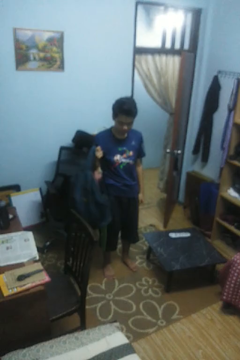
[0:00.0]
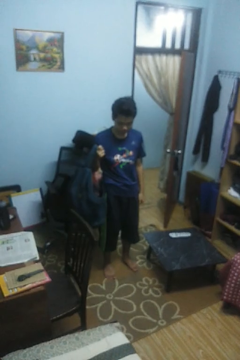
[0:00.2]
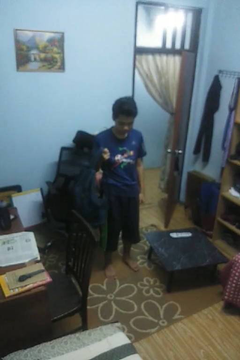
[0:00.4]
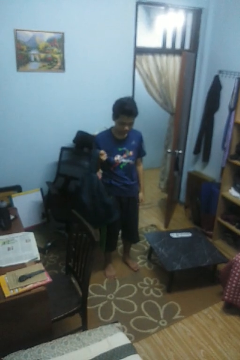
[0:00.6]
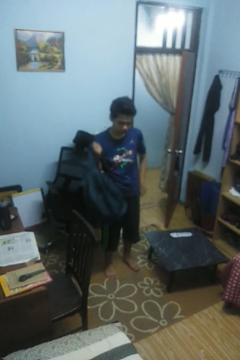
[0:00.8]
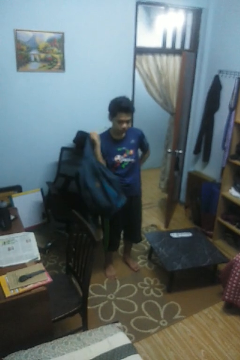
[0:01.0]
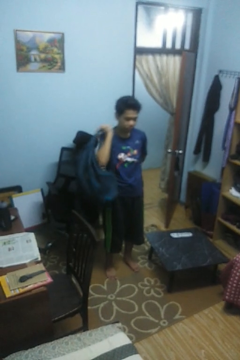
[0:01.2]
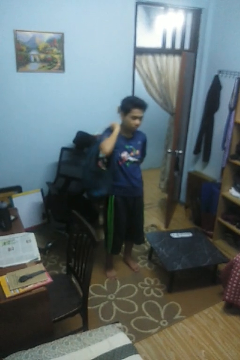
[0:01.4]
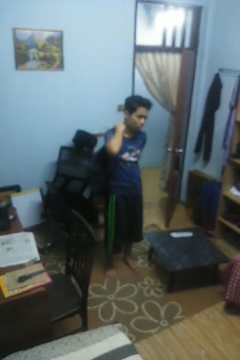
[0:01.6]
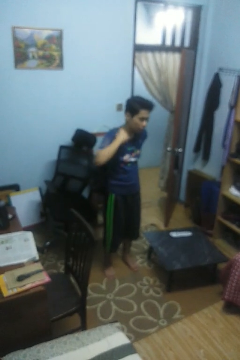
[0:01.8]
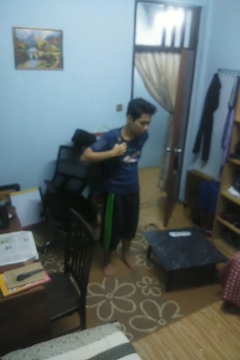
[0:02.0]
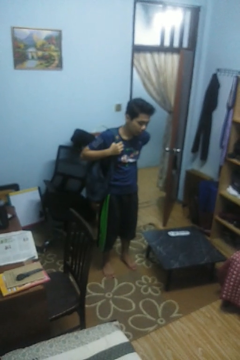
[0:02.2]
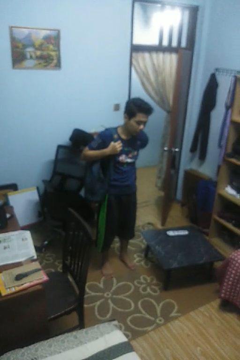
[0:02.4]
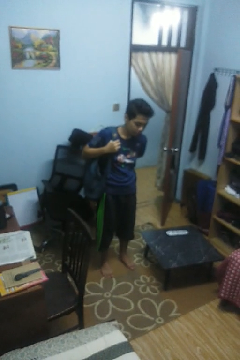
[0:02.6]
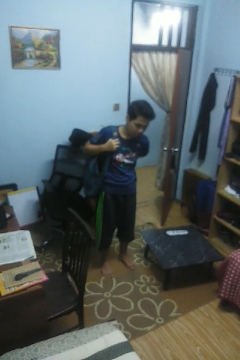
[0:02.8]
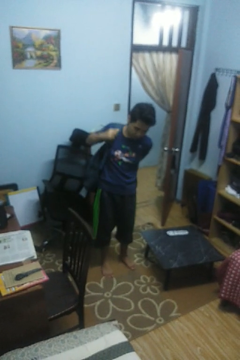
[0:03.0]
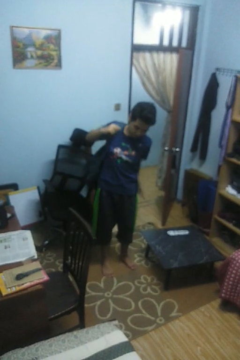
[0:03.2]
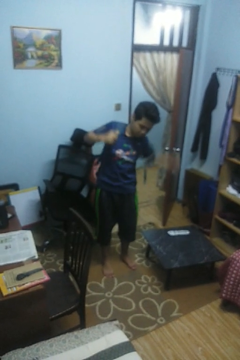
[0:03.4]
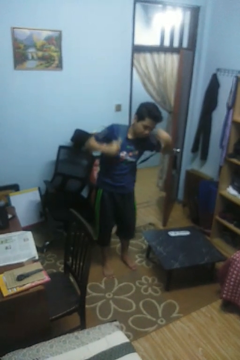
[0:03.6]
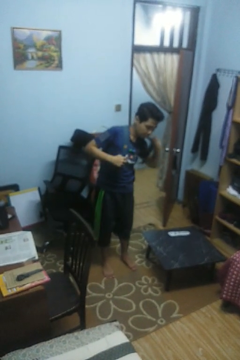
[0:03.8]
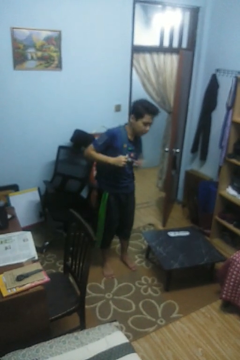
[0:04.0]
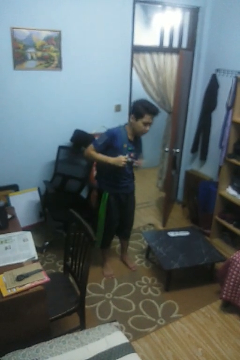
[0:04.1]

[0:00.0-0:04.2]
person puts on backpack

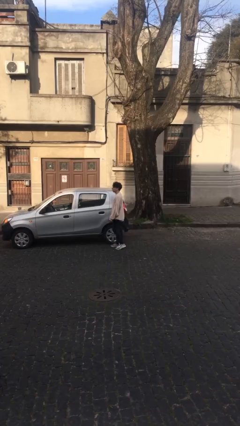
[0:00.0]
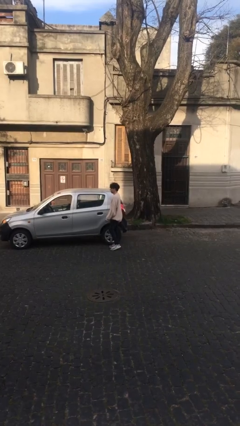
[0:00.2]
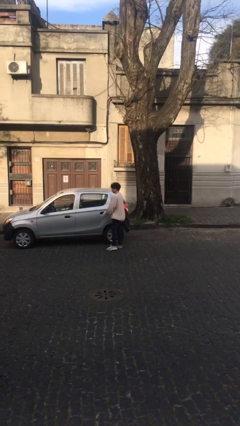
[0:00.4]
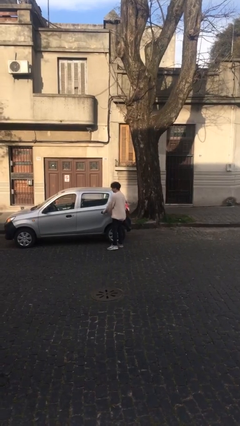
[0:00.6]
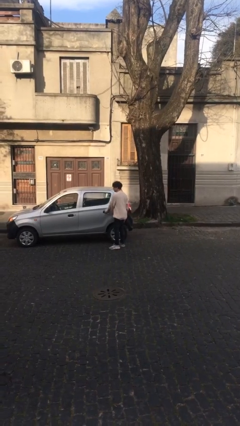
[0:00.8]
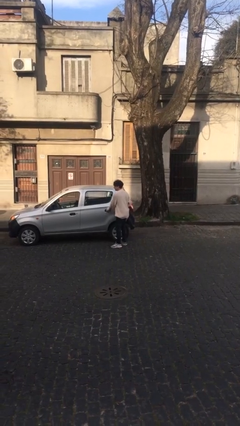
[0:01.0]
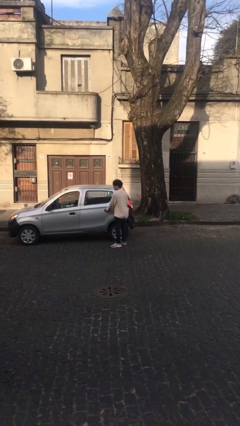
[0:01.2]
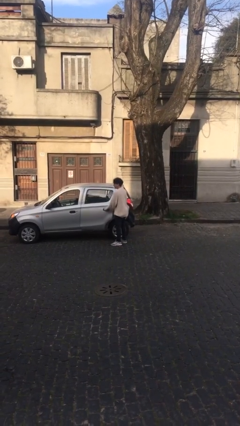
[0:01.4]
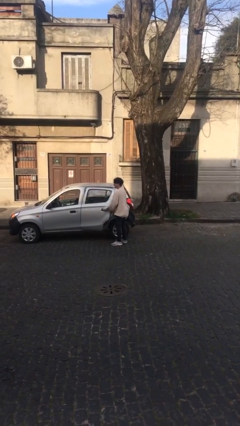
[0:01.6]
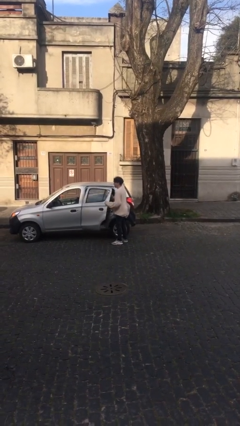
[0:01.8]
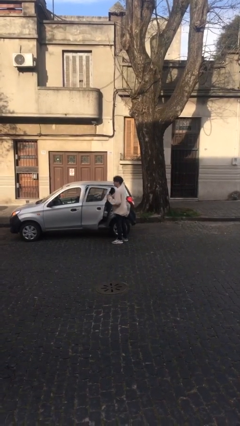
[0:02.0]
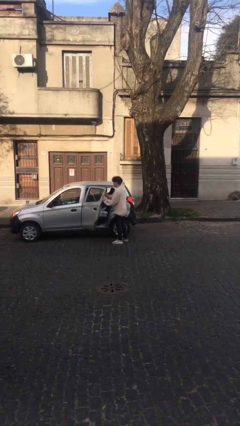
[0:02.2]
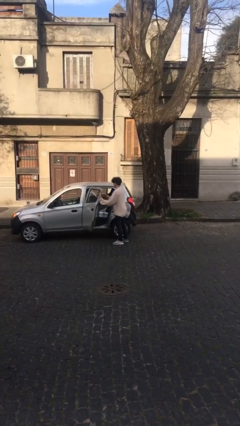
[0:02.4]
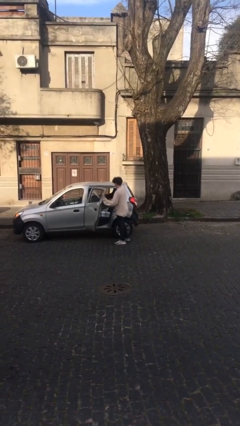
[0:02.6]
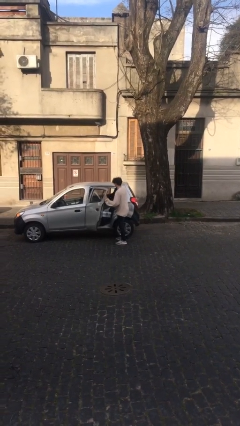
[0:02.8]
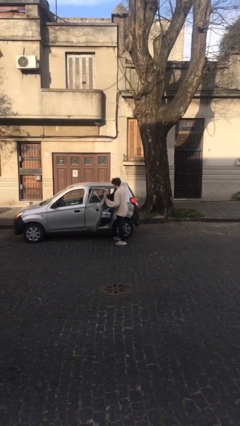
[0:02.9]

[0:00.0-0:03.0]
person opens car door

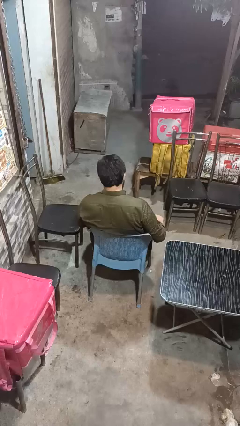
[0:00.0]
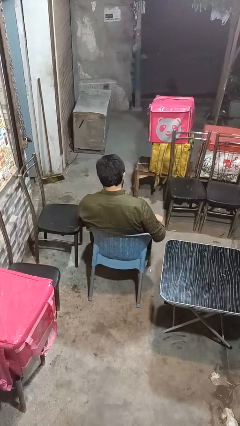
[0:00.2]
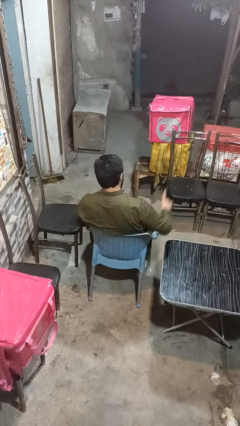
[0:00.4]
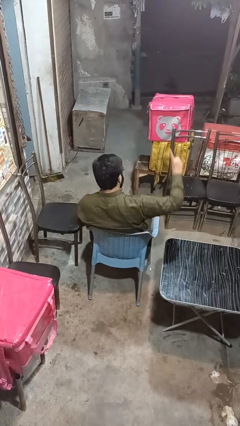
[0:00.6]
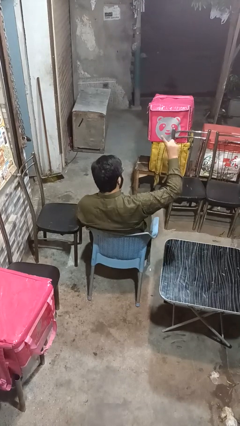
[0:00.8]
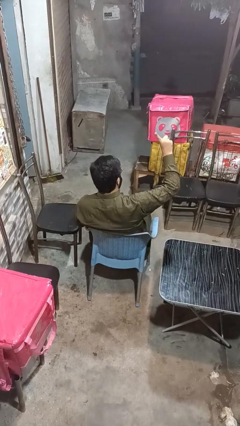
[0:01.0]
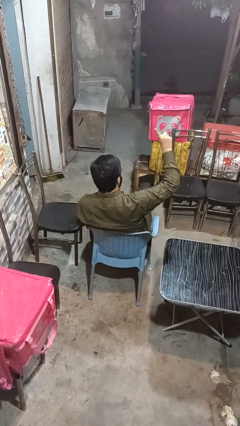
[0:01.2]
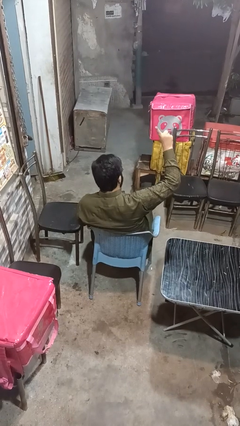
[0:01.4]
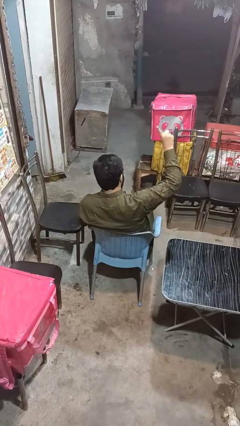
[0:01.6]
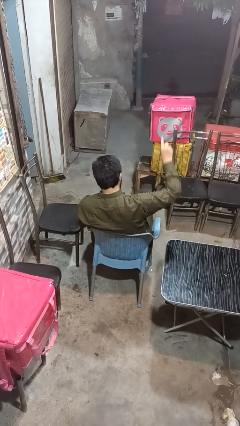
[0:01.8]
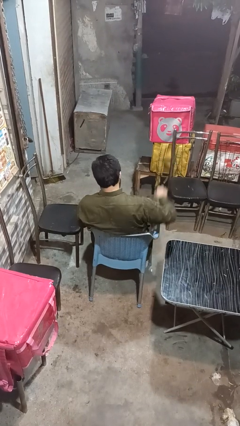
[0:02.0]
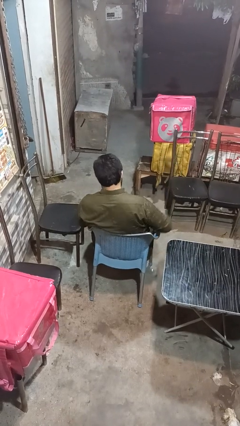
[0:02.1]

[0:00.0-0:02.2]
person gestures number one

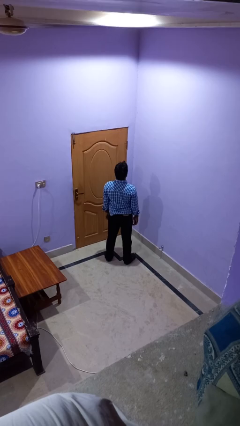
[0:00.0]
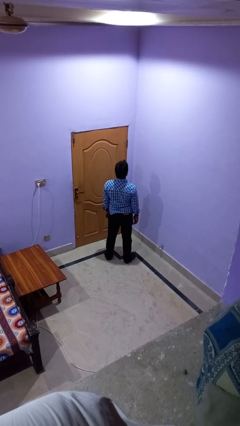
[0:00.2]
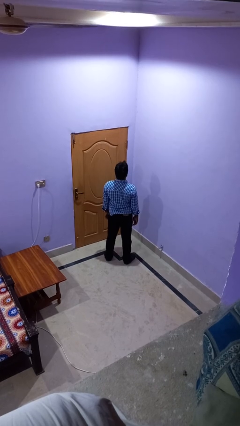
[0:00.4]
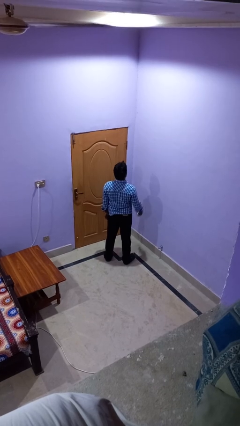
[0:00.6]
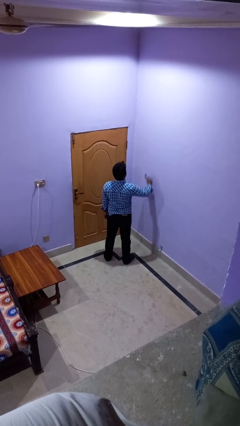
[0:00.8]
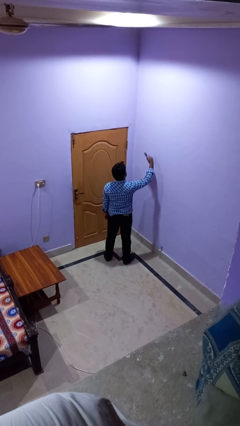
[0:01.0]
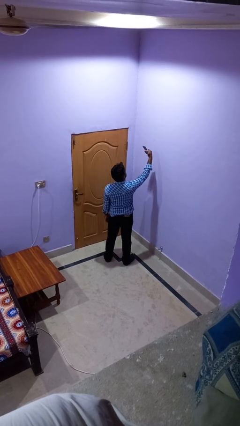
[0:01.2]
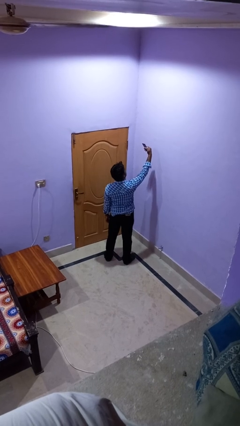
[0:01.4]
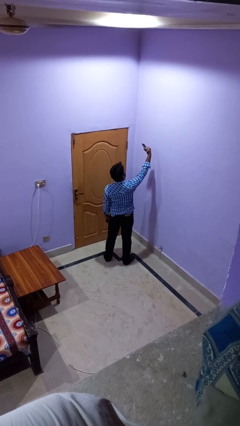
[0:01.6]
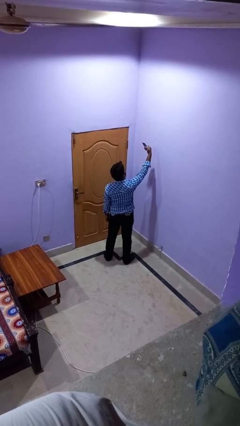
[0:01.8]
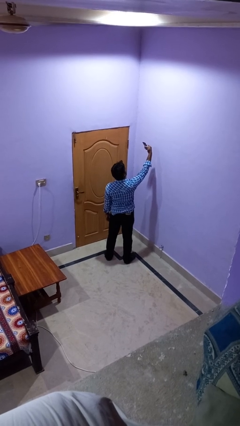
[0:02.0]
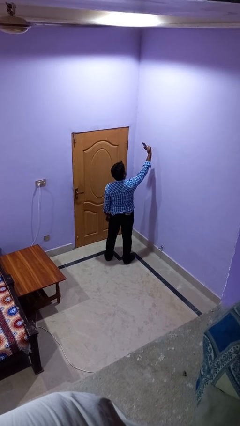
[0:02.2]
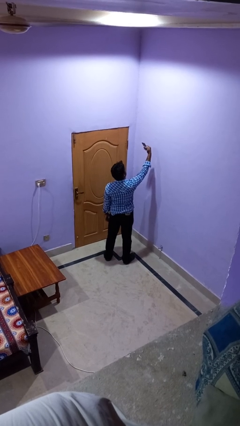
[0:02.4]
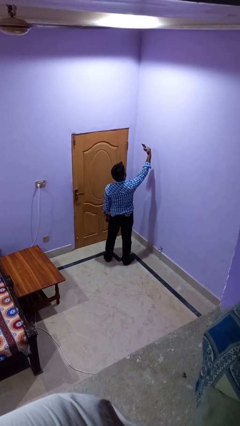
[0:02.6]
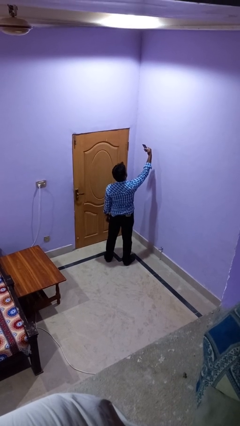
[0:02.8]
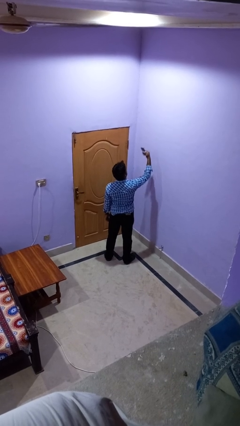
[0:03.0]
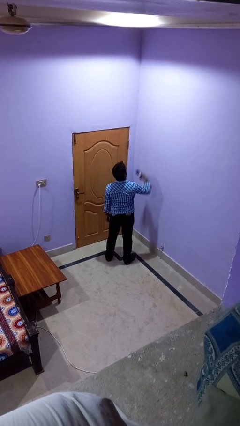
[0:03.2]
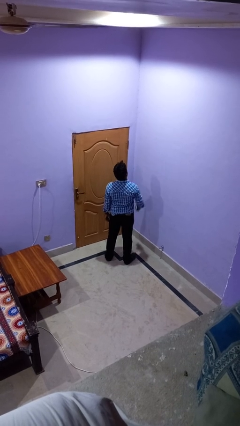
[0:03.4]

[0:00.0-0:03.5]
person takes selfie

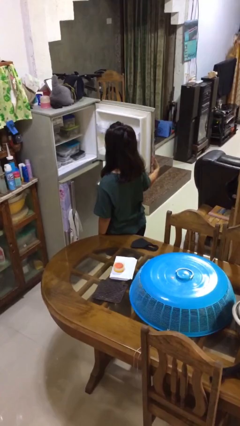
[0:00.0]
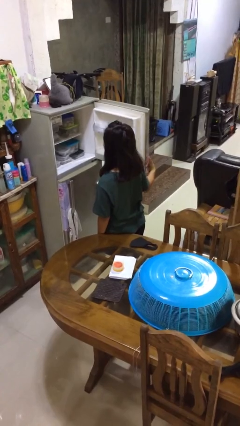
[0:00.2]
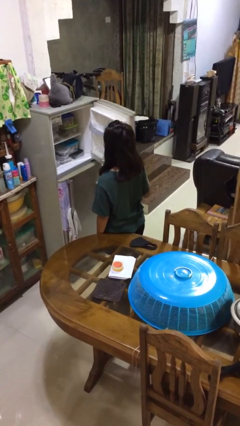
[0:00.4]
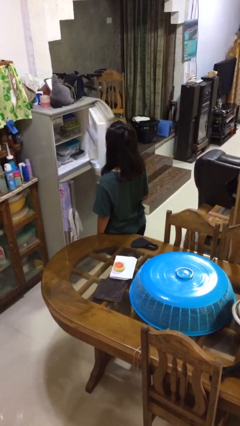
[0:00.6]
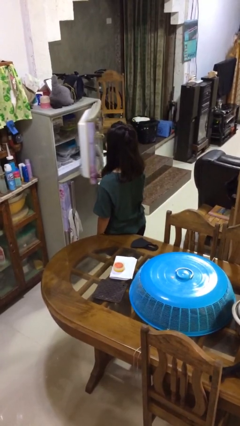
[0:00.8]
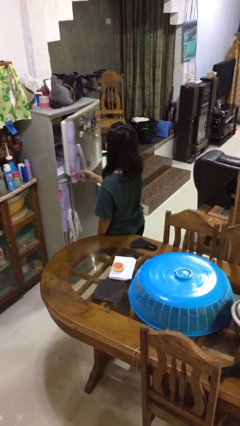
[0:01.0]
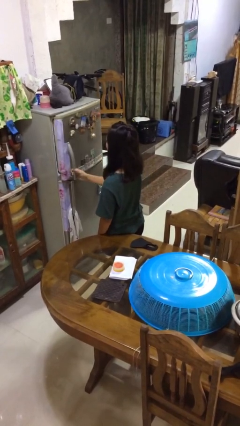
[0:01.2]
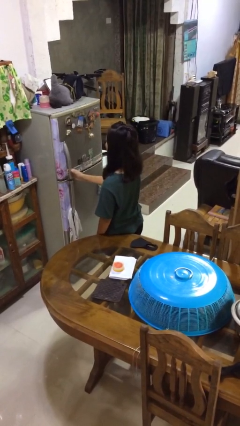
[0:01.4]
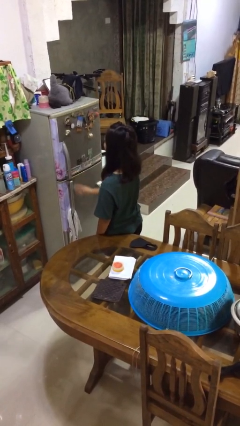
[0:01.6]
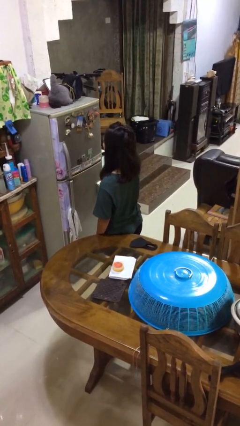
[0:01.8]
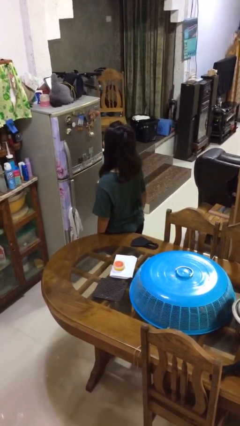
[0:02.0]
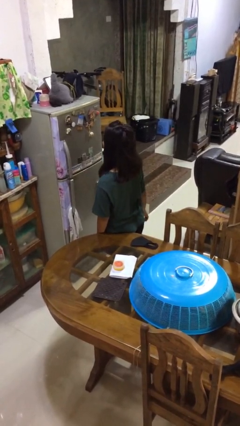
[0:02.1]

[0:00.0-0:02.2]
person closes refrigerator

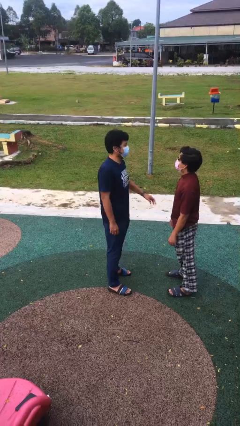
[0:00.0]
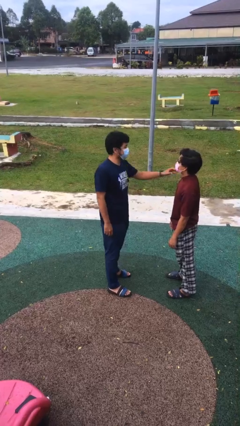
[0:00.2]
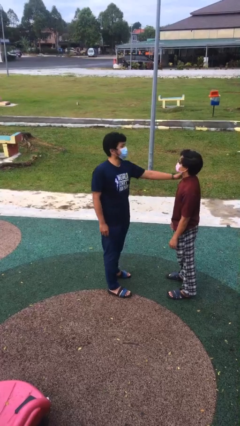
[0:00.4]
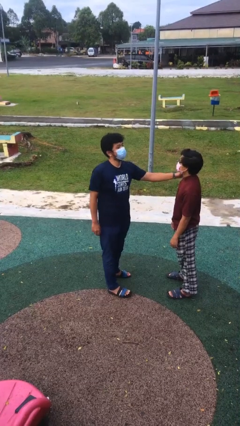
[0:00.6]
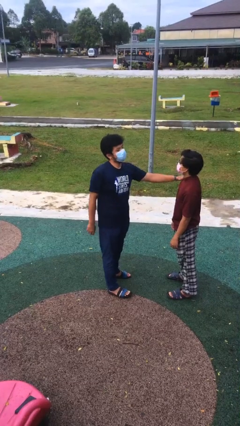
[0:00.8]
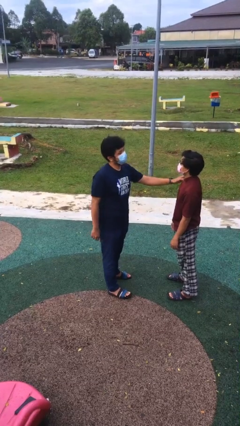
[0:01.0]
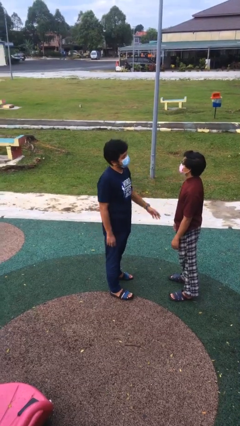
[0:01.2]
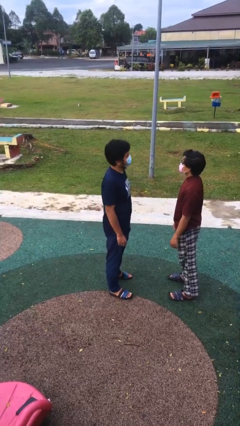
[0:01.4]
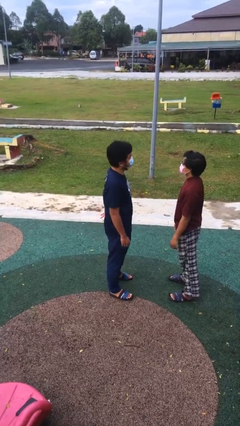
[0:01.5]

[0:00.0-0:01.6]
person pounds shoulders of person

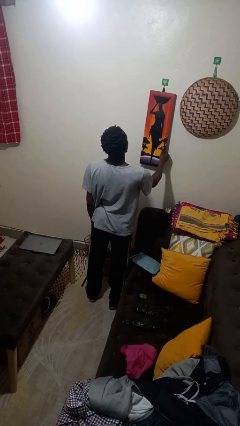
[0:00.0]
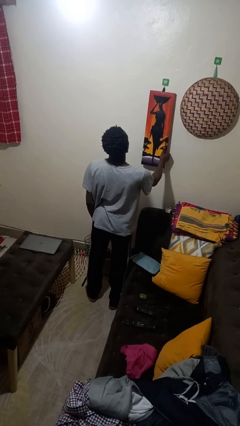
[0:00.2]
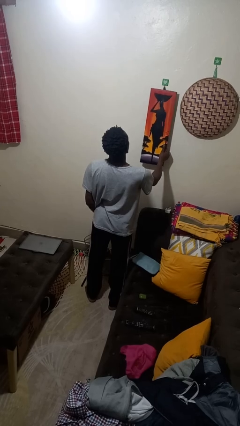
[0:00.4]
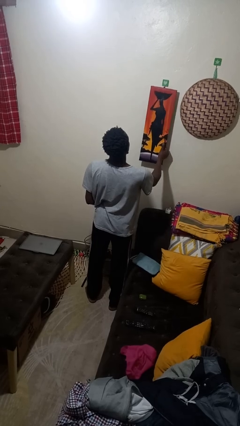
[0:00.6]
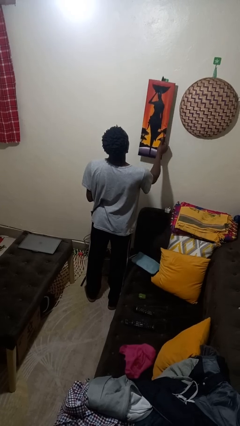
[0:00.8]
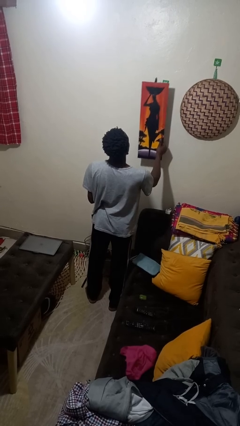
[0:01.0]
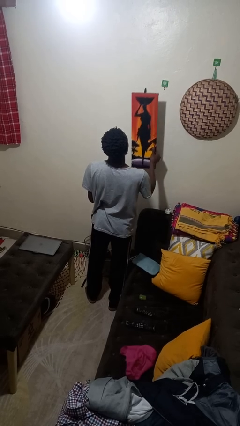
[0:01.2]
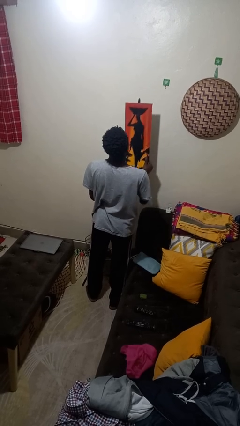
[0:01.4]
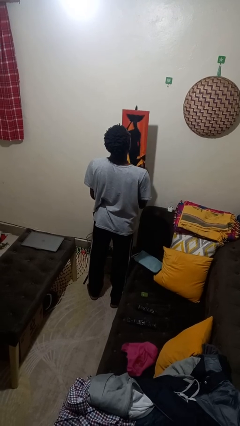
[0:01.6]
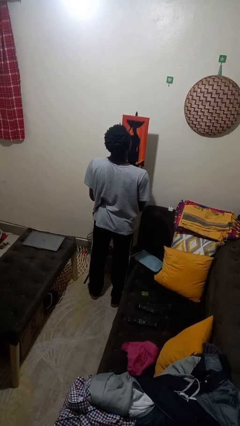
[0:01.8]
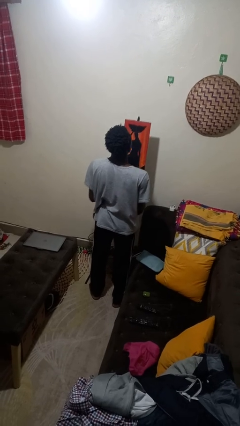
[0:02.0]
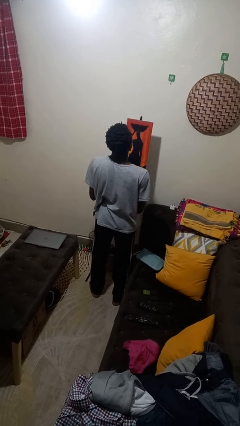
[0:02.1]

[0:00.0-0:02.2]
person takes down picture frame
